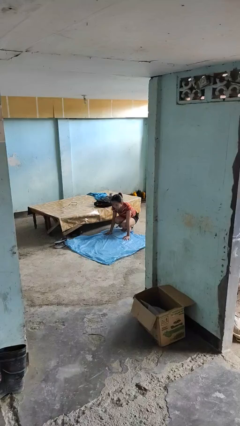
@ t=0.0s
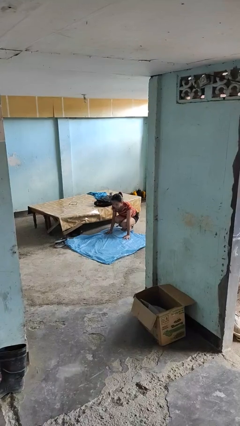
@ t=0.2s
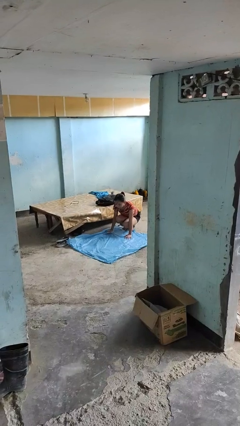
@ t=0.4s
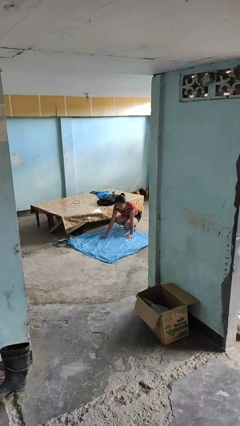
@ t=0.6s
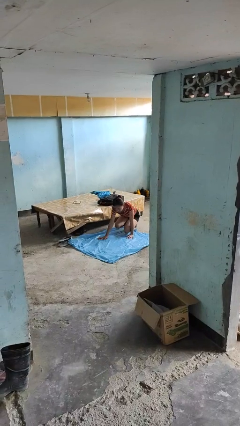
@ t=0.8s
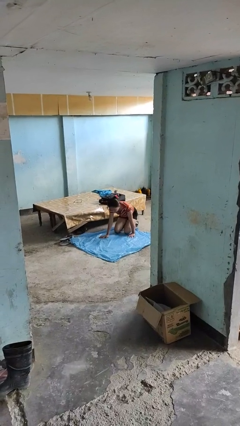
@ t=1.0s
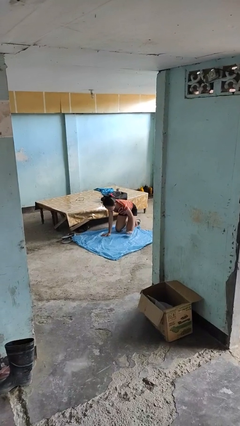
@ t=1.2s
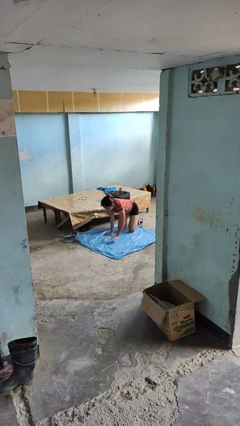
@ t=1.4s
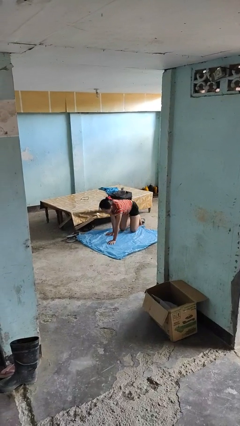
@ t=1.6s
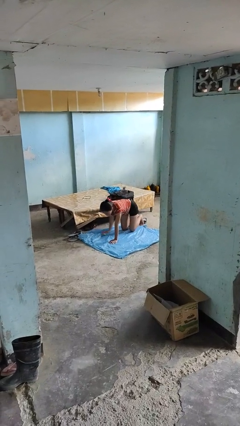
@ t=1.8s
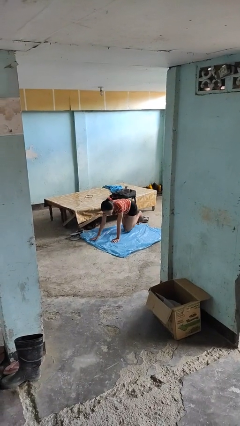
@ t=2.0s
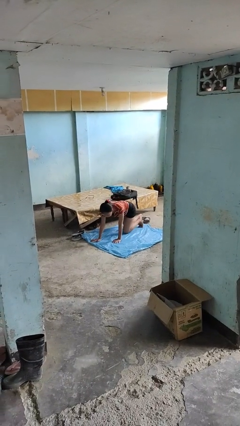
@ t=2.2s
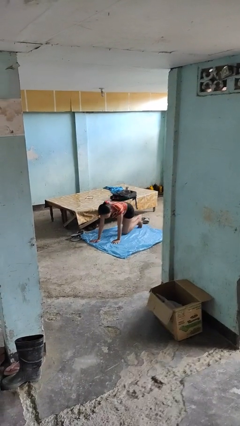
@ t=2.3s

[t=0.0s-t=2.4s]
person crawls

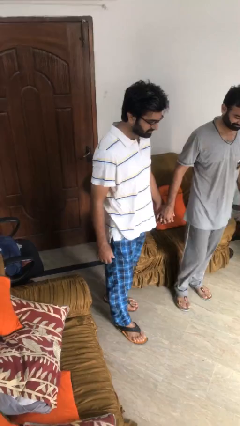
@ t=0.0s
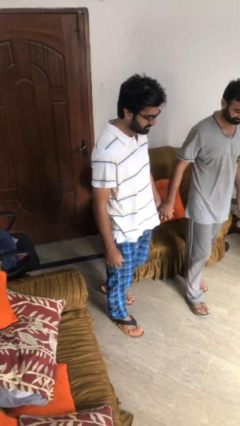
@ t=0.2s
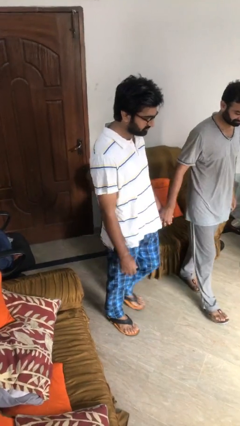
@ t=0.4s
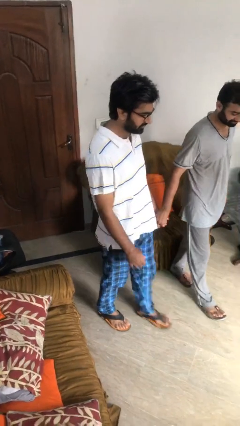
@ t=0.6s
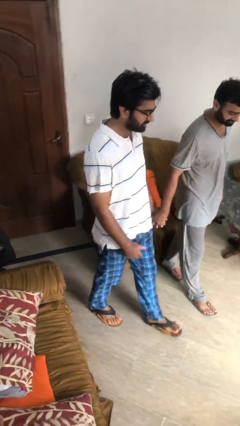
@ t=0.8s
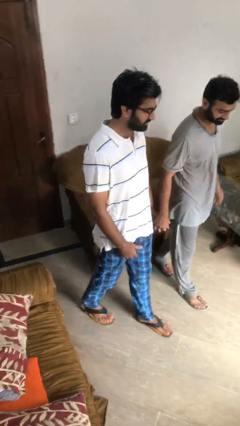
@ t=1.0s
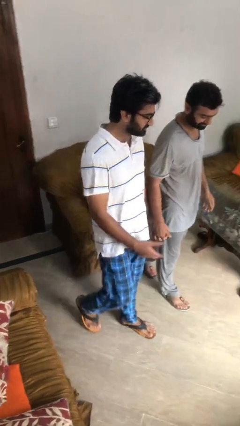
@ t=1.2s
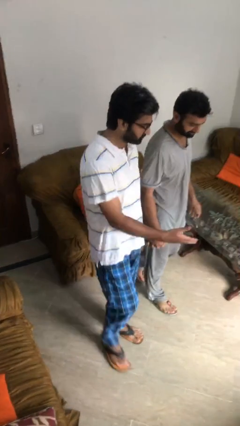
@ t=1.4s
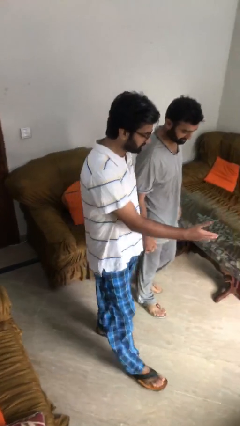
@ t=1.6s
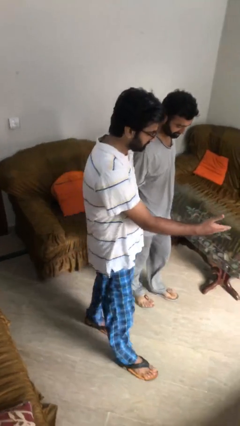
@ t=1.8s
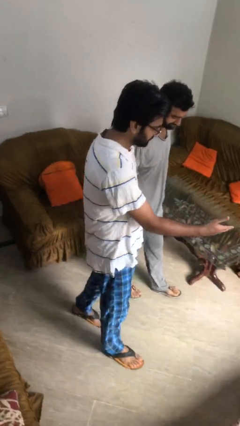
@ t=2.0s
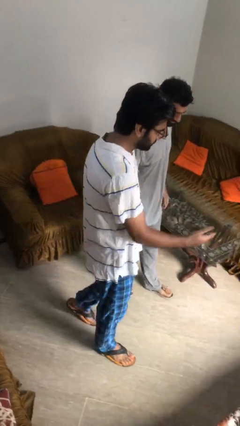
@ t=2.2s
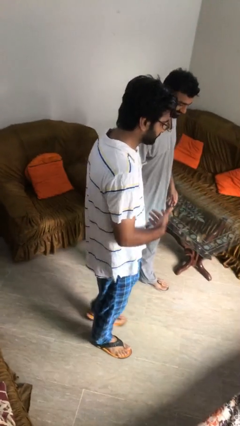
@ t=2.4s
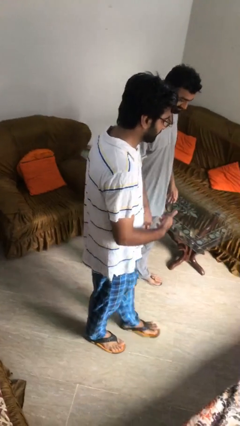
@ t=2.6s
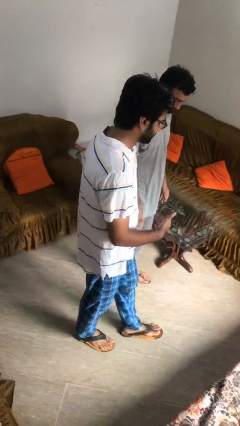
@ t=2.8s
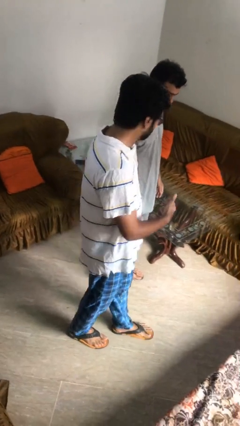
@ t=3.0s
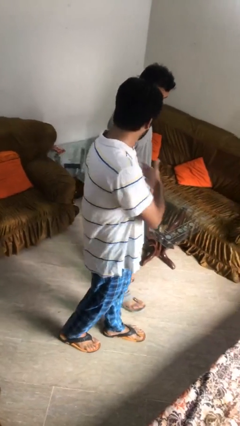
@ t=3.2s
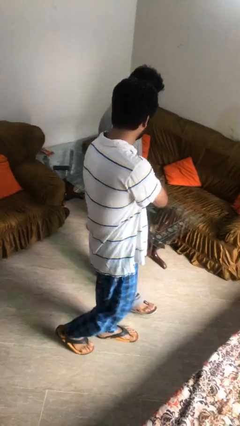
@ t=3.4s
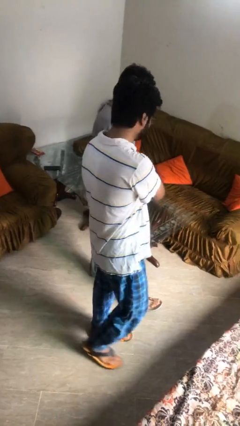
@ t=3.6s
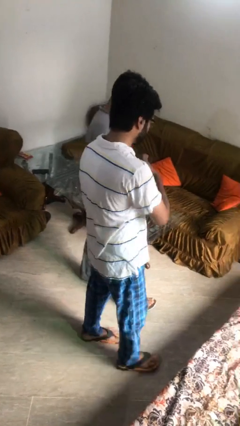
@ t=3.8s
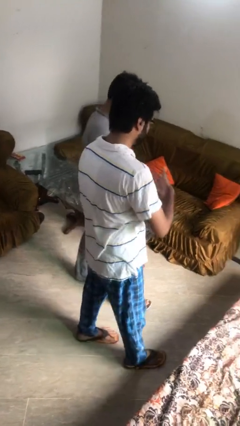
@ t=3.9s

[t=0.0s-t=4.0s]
person talks to person

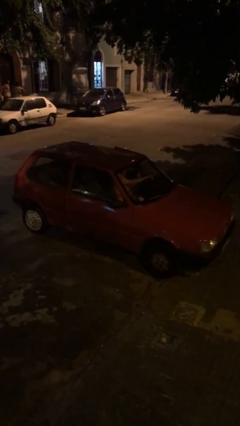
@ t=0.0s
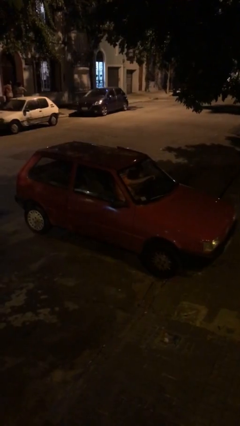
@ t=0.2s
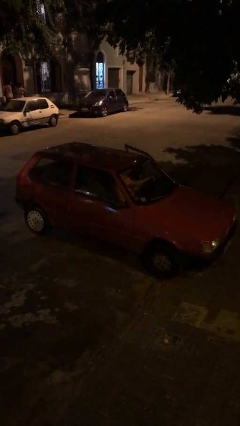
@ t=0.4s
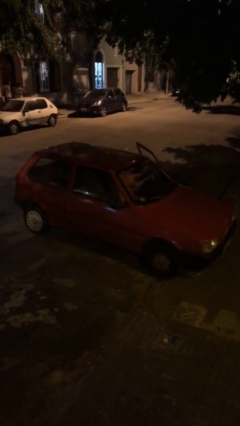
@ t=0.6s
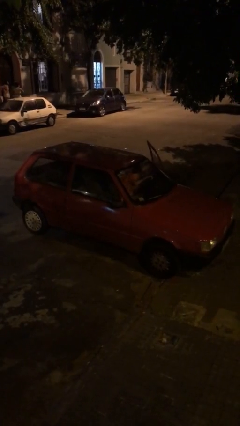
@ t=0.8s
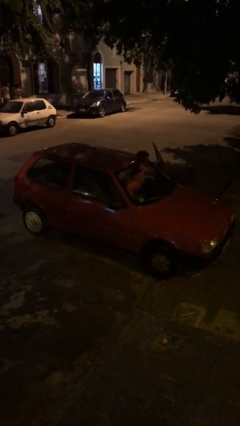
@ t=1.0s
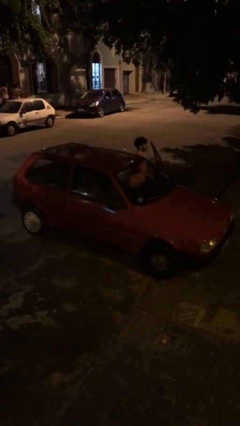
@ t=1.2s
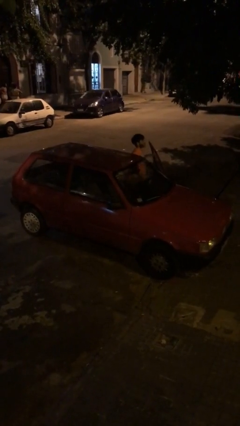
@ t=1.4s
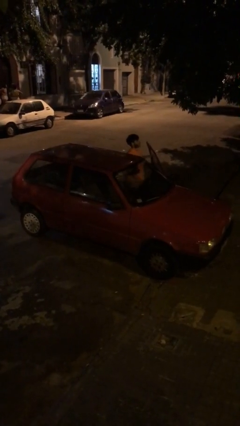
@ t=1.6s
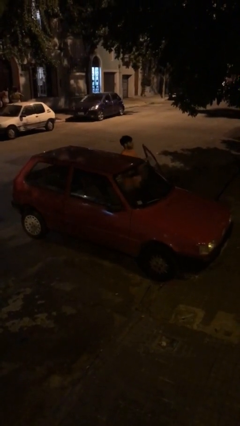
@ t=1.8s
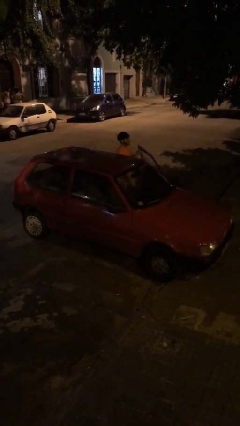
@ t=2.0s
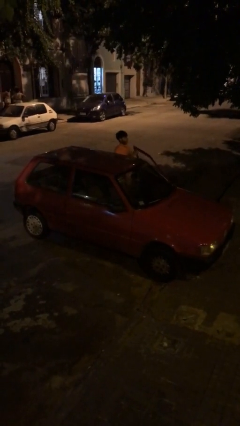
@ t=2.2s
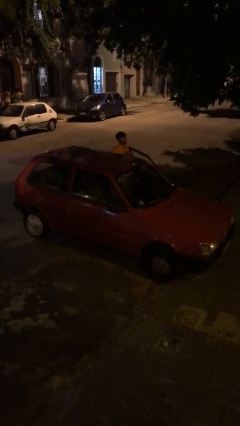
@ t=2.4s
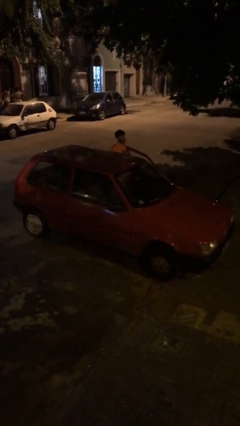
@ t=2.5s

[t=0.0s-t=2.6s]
car drops off person

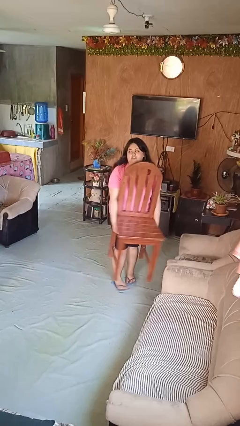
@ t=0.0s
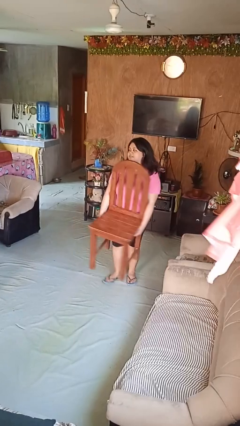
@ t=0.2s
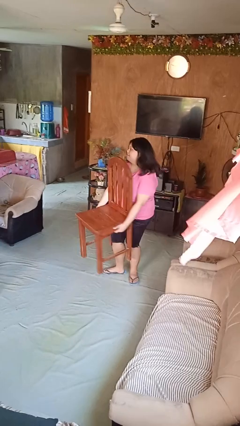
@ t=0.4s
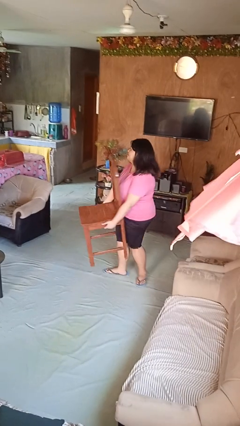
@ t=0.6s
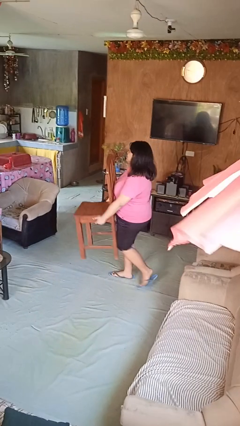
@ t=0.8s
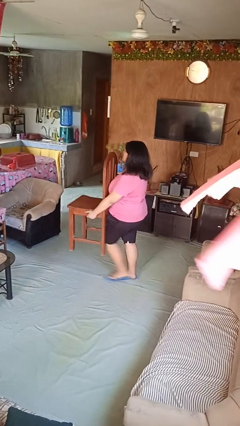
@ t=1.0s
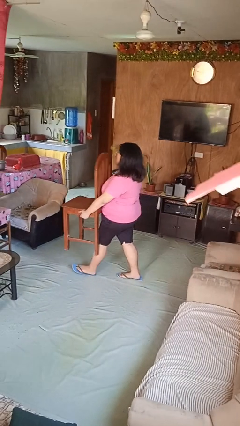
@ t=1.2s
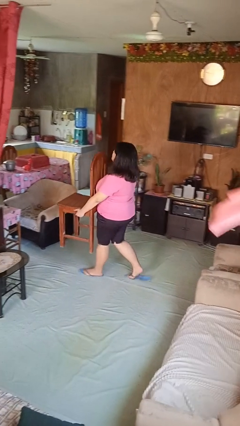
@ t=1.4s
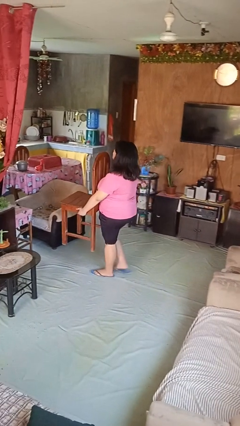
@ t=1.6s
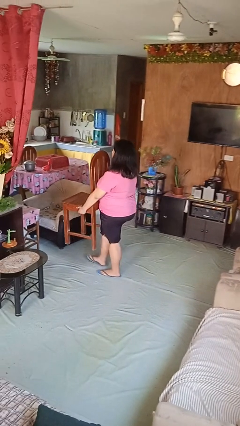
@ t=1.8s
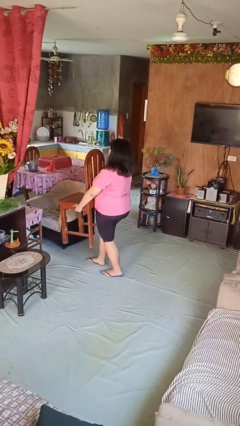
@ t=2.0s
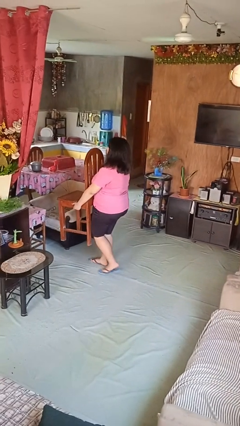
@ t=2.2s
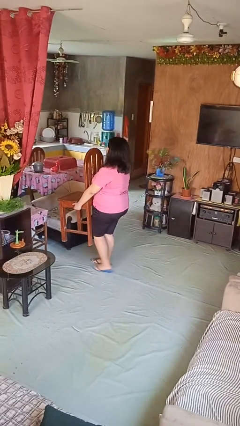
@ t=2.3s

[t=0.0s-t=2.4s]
person carries furniture

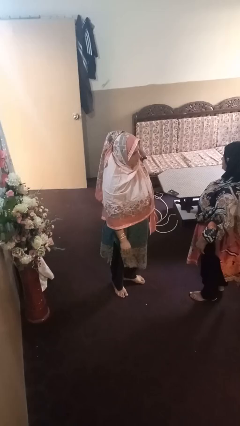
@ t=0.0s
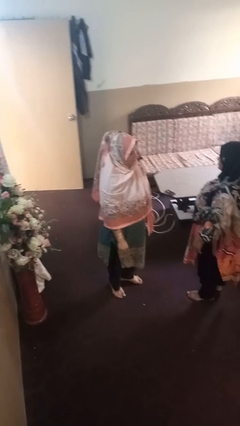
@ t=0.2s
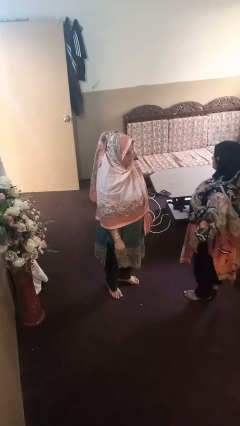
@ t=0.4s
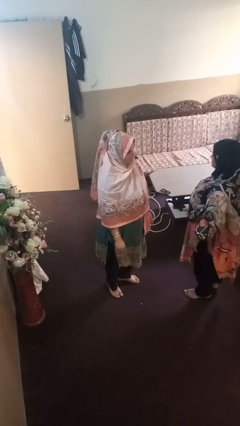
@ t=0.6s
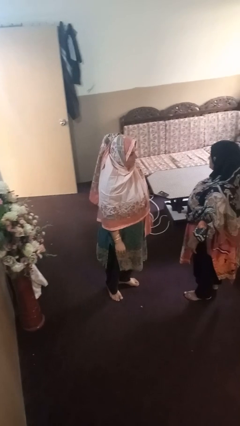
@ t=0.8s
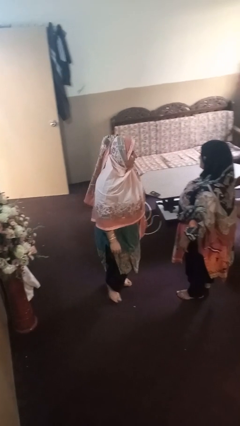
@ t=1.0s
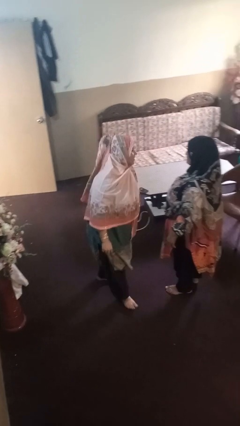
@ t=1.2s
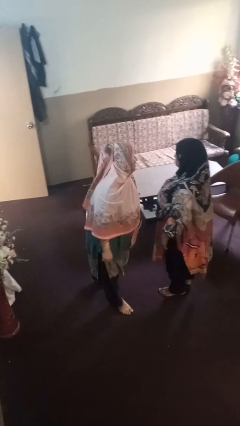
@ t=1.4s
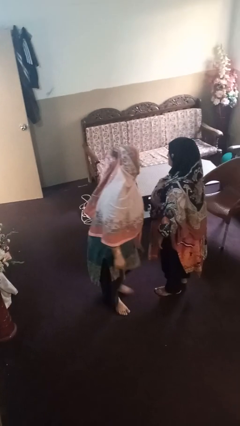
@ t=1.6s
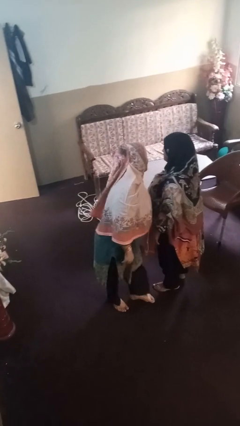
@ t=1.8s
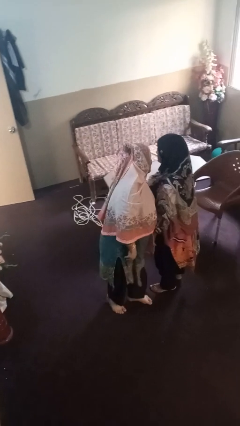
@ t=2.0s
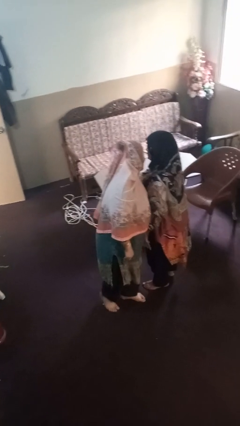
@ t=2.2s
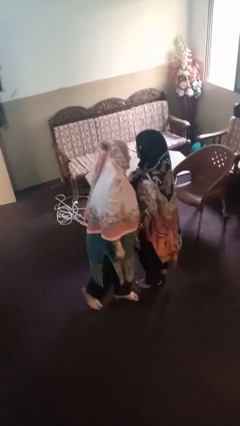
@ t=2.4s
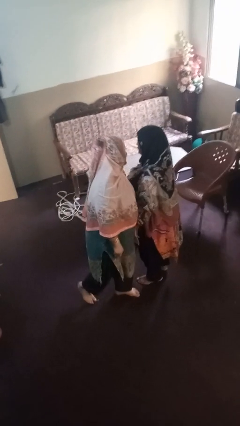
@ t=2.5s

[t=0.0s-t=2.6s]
person laughs with person

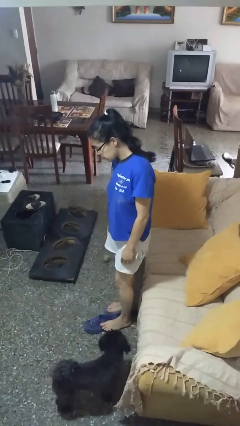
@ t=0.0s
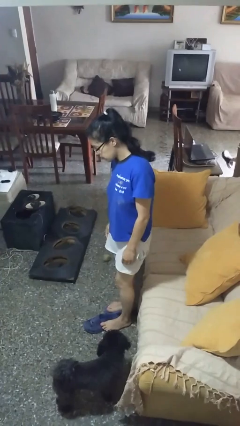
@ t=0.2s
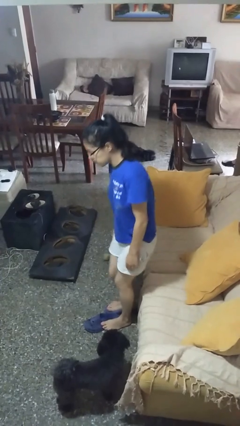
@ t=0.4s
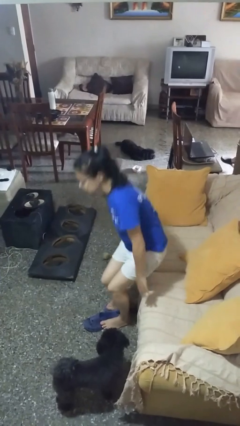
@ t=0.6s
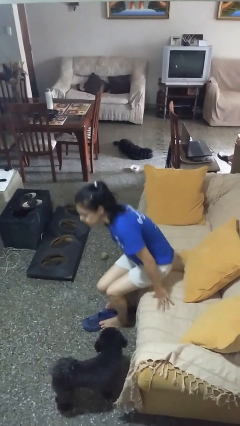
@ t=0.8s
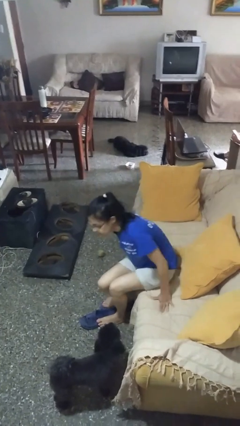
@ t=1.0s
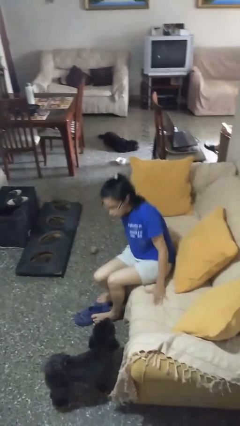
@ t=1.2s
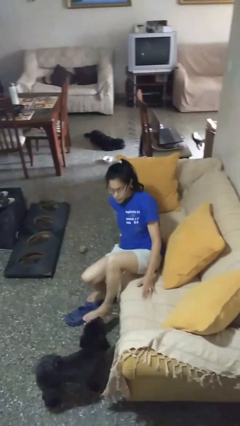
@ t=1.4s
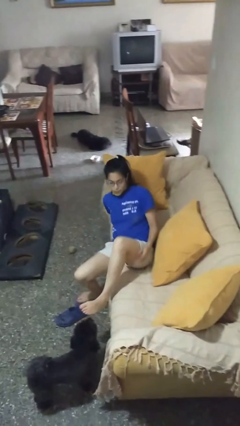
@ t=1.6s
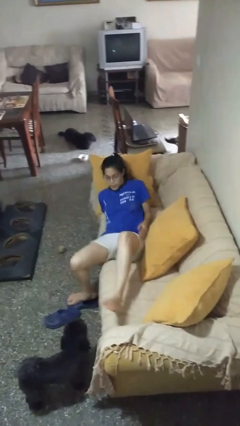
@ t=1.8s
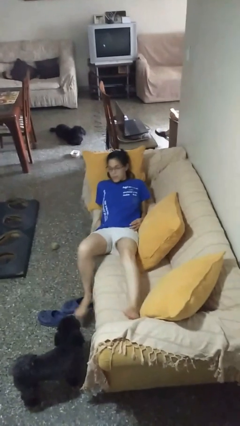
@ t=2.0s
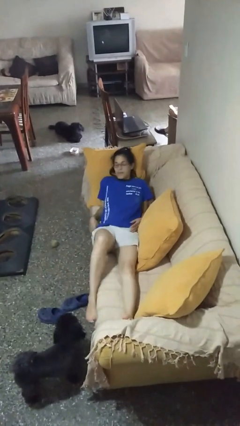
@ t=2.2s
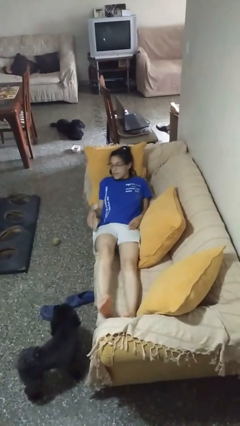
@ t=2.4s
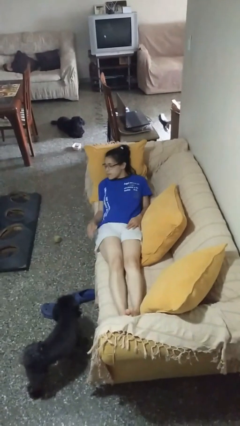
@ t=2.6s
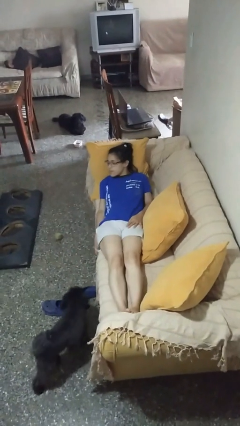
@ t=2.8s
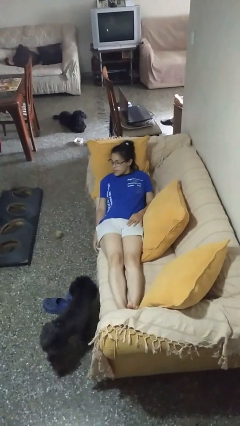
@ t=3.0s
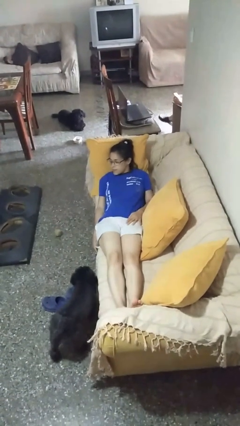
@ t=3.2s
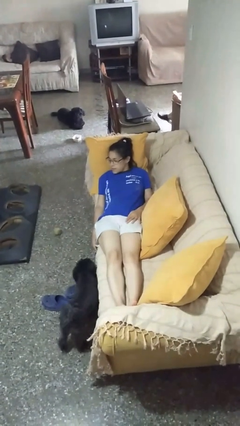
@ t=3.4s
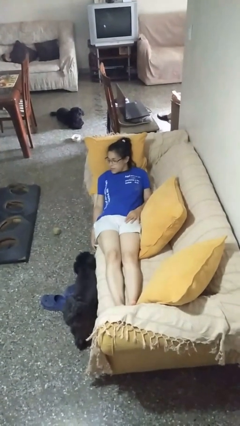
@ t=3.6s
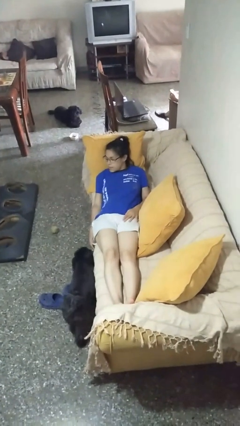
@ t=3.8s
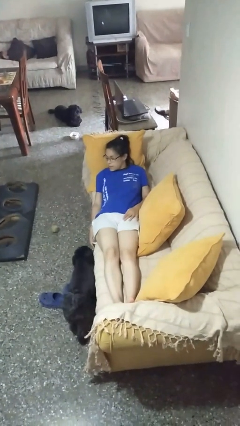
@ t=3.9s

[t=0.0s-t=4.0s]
person lies down on couch
